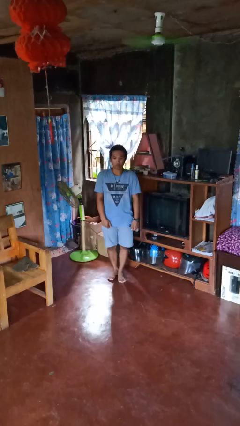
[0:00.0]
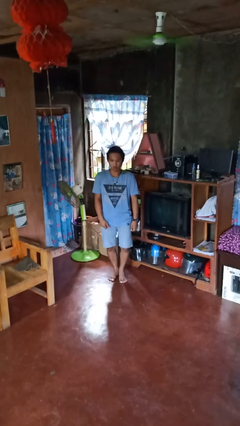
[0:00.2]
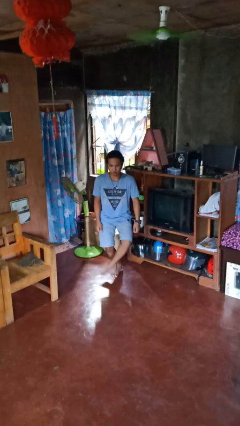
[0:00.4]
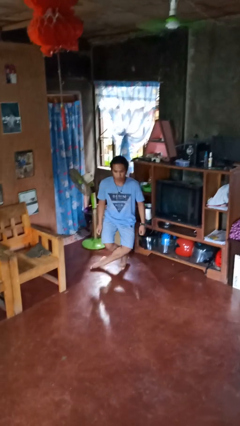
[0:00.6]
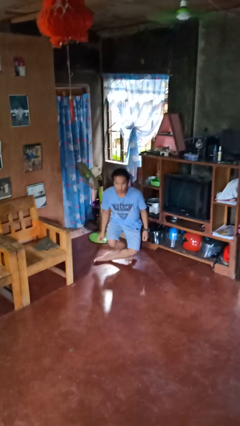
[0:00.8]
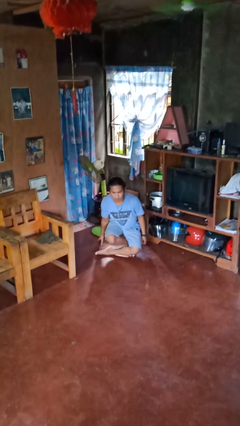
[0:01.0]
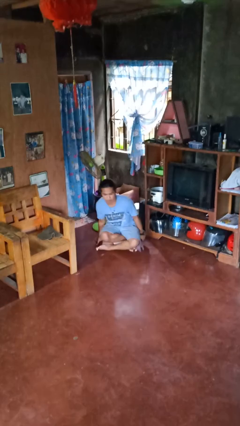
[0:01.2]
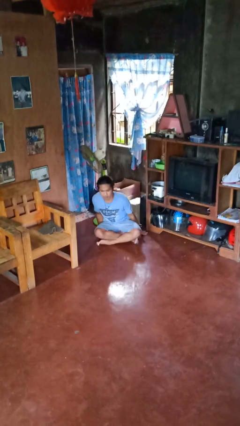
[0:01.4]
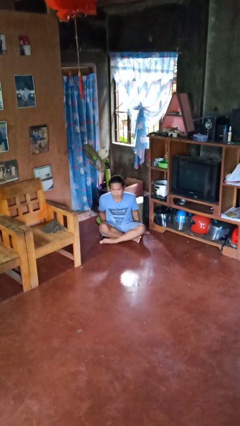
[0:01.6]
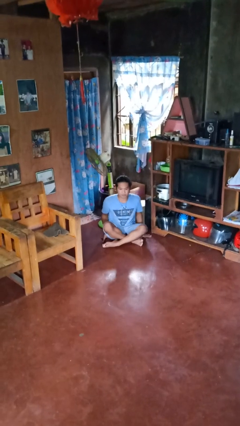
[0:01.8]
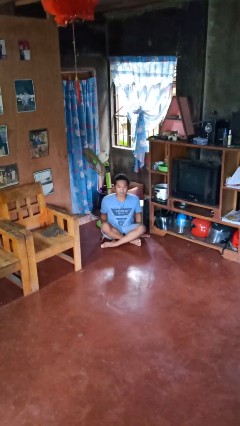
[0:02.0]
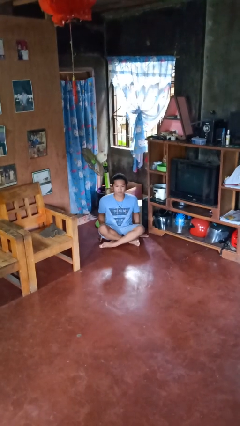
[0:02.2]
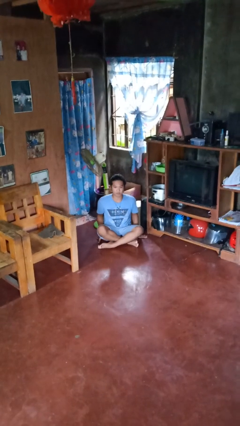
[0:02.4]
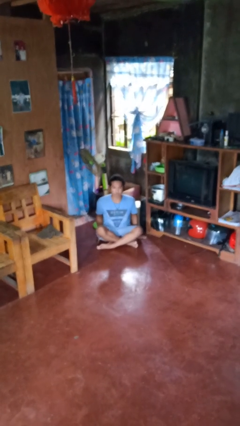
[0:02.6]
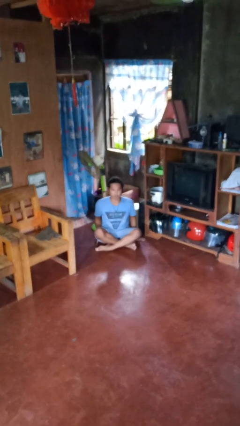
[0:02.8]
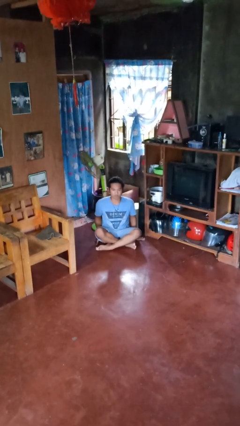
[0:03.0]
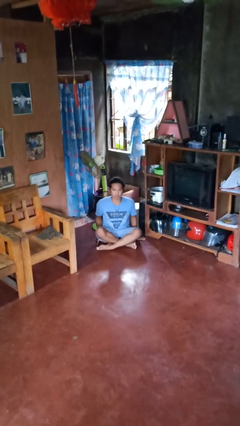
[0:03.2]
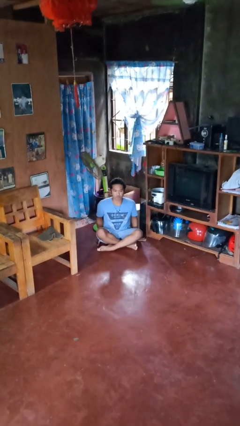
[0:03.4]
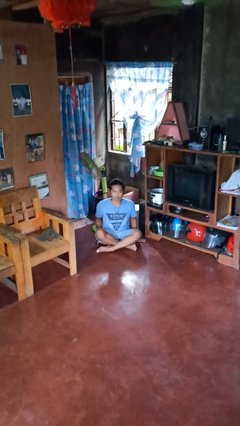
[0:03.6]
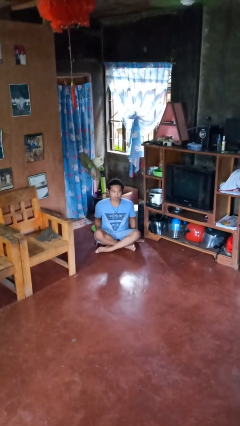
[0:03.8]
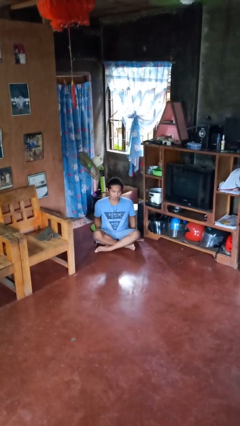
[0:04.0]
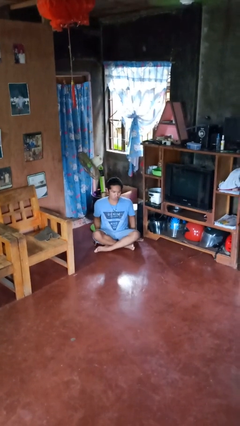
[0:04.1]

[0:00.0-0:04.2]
person sits crisscross

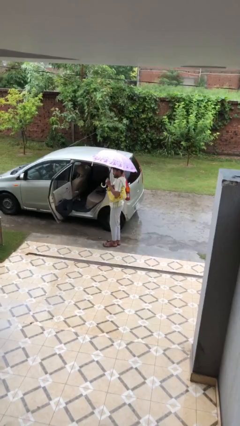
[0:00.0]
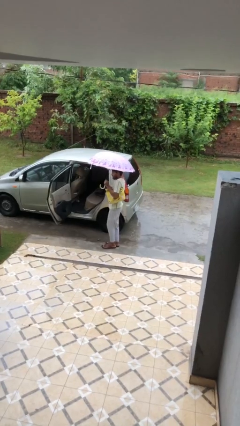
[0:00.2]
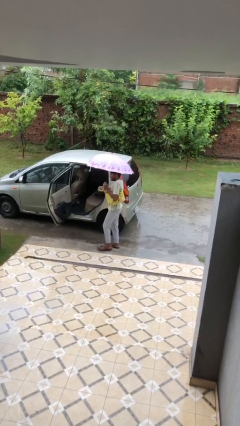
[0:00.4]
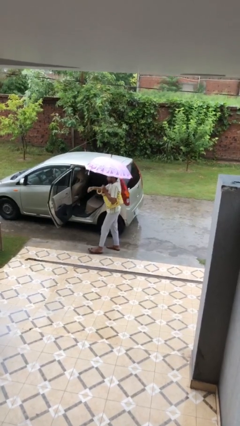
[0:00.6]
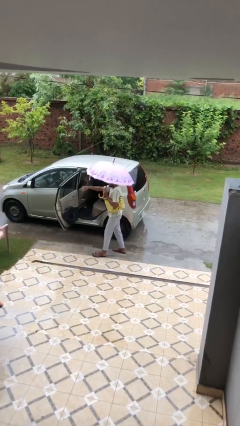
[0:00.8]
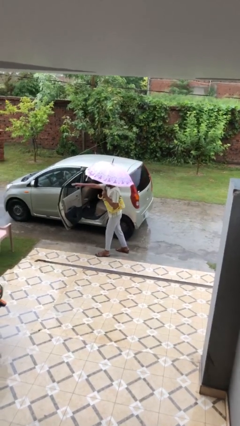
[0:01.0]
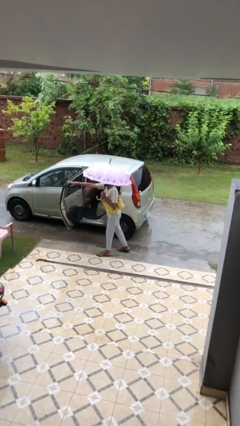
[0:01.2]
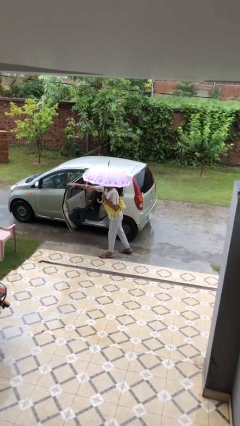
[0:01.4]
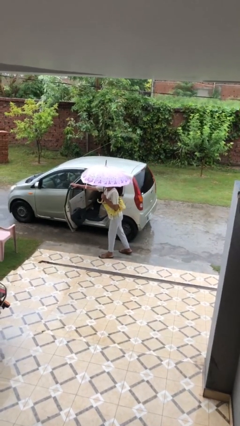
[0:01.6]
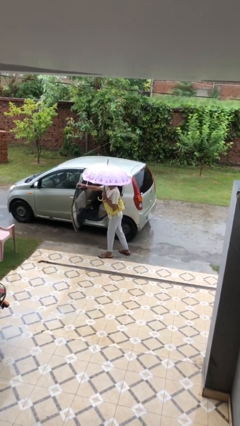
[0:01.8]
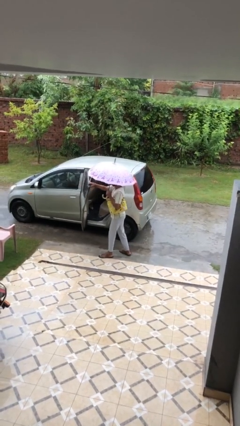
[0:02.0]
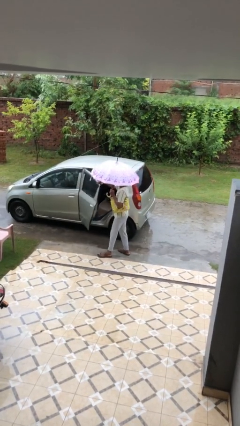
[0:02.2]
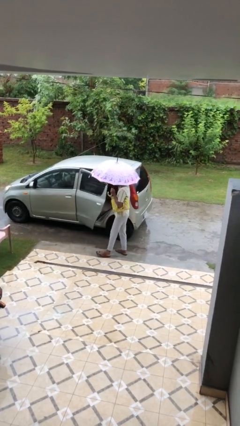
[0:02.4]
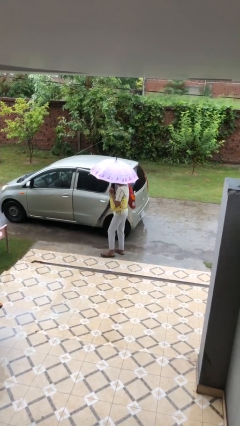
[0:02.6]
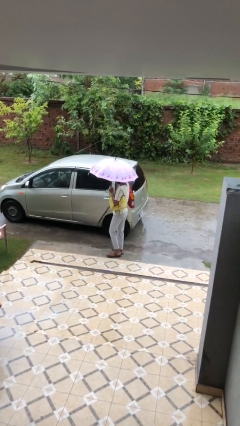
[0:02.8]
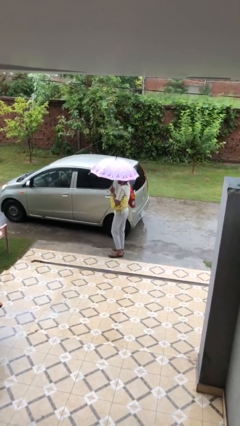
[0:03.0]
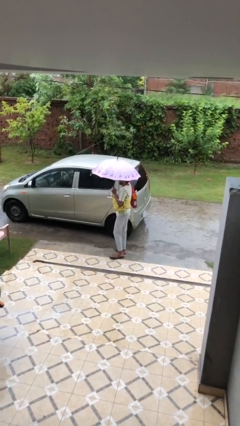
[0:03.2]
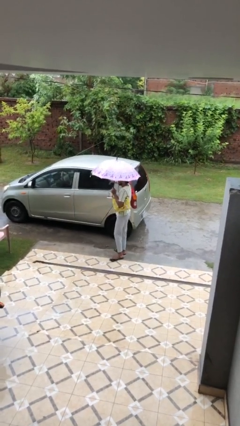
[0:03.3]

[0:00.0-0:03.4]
person closes car door

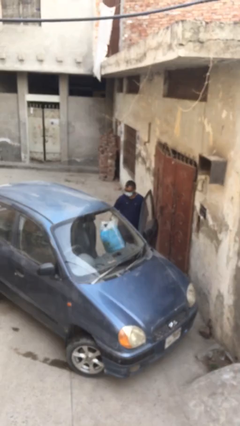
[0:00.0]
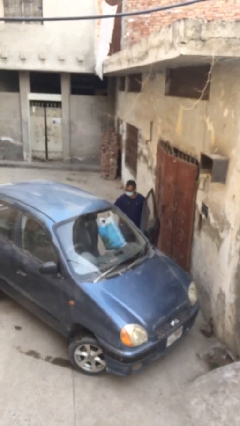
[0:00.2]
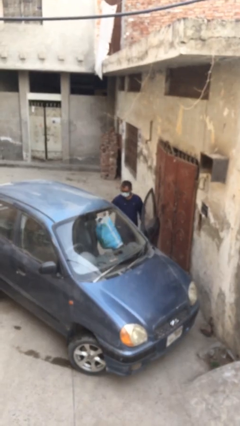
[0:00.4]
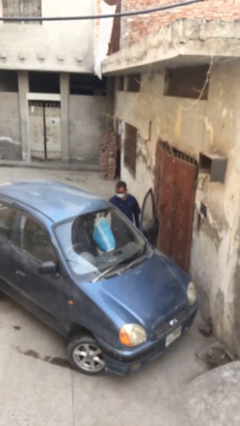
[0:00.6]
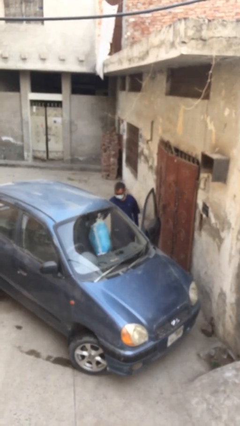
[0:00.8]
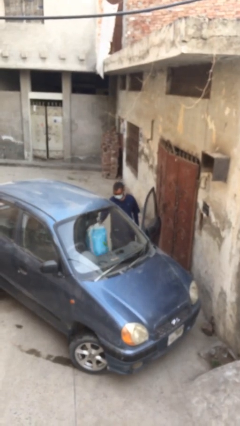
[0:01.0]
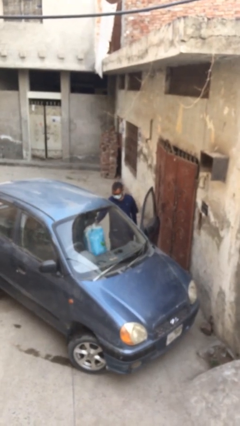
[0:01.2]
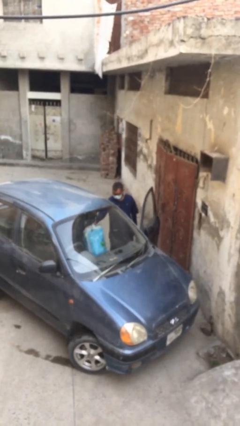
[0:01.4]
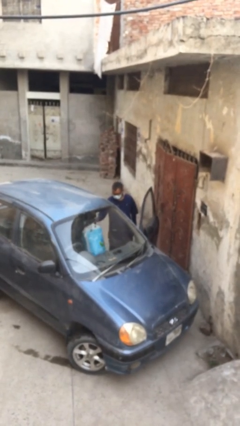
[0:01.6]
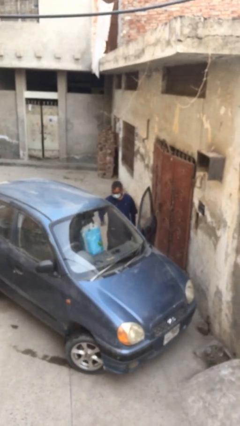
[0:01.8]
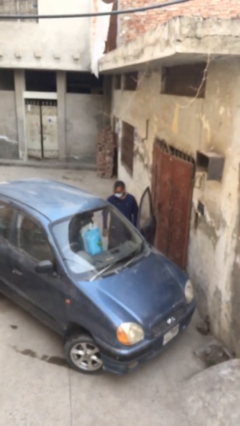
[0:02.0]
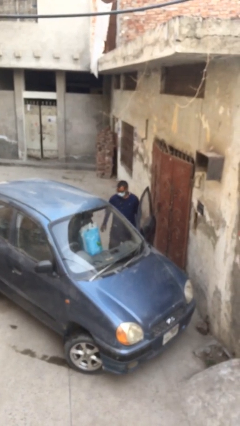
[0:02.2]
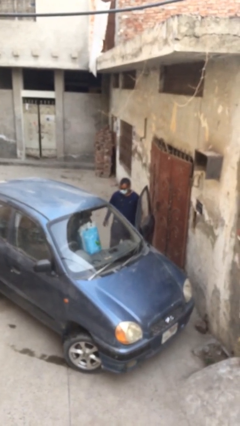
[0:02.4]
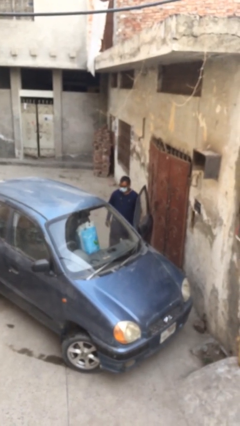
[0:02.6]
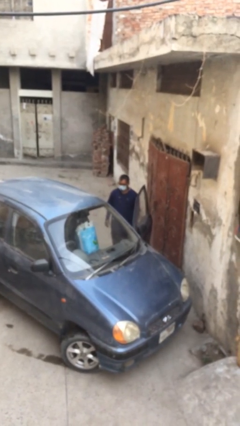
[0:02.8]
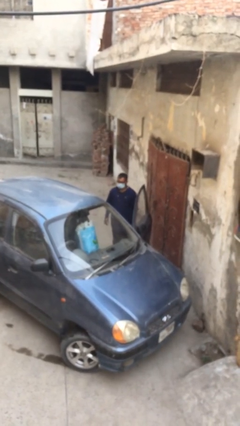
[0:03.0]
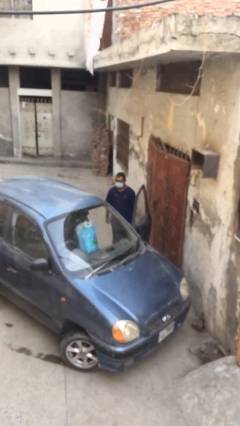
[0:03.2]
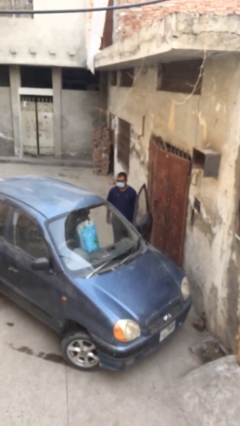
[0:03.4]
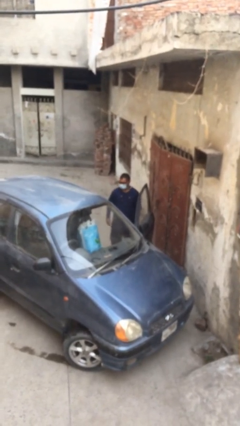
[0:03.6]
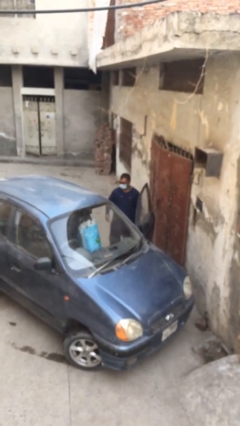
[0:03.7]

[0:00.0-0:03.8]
person loads car

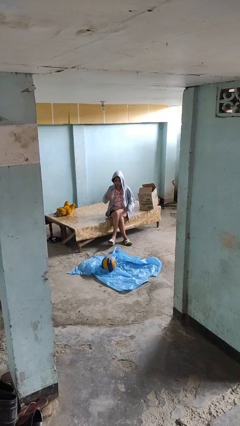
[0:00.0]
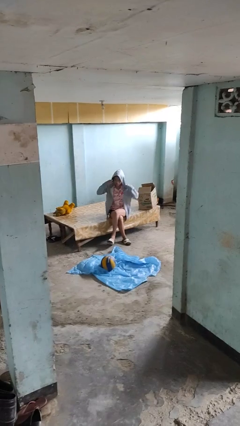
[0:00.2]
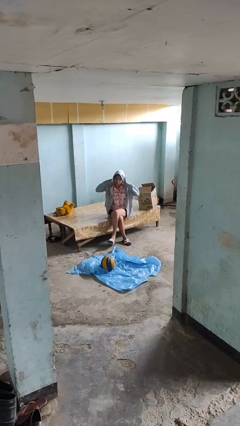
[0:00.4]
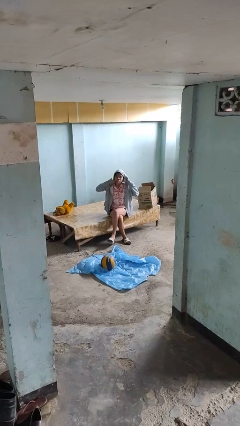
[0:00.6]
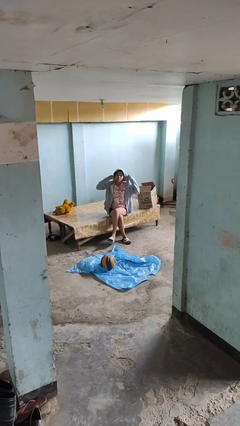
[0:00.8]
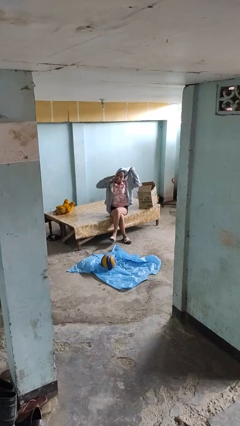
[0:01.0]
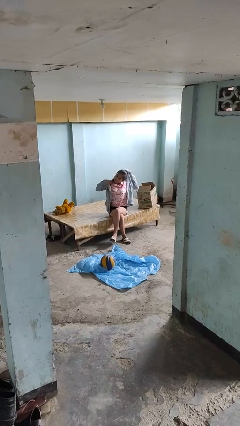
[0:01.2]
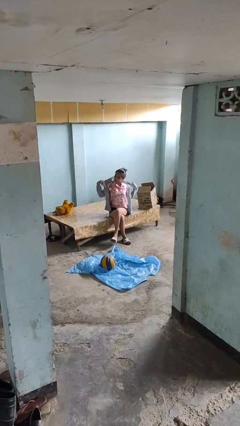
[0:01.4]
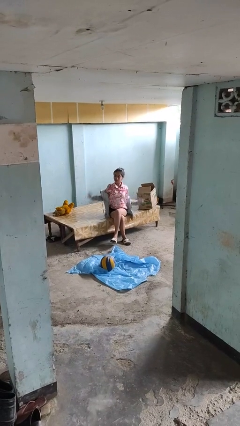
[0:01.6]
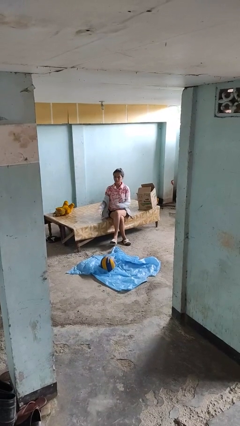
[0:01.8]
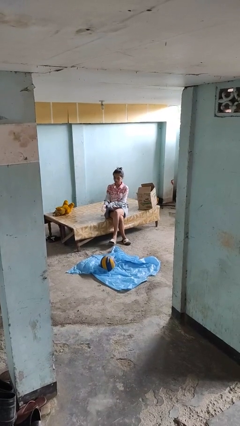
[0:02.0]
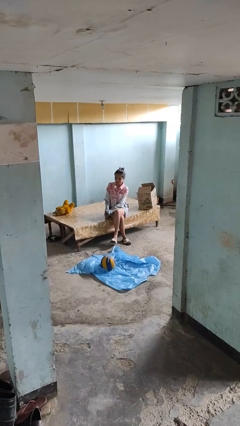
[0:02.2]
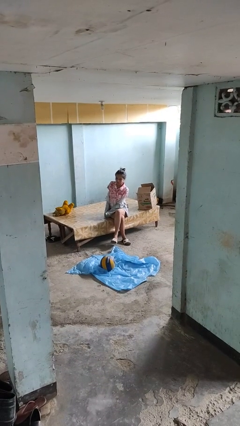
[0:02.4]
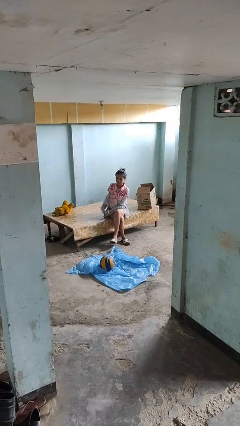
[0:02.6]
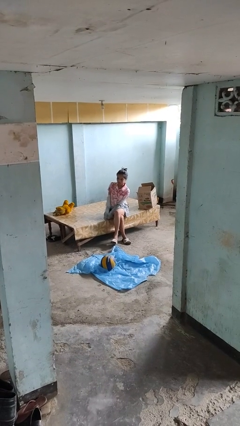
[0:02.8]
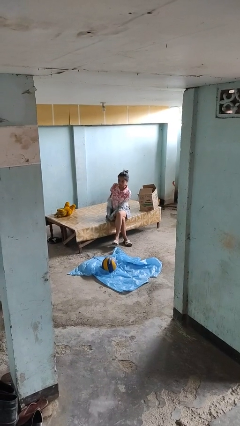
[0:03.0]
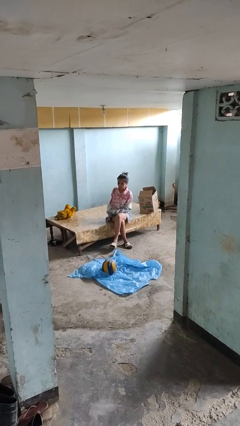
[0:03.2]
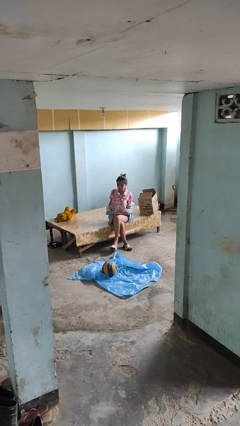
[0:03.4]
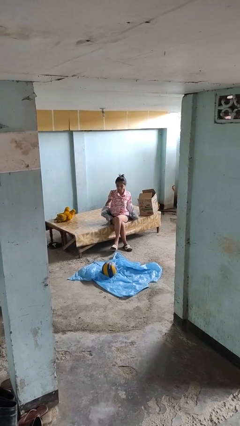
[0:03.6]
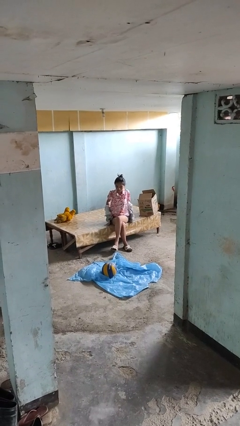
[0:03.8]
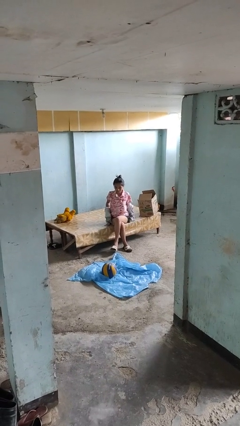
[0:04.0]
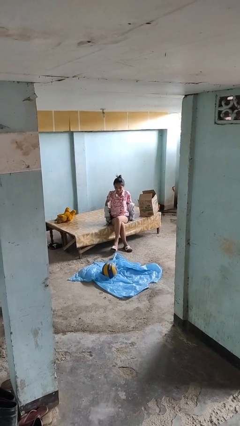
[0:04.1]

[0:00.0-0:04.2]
person takes off hoodie

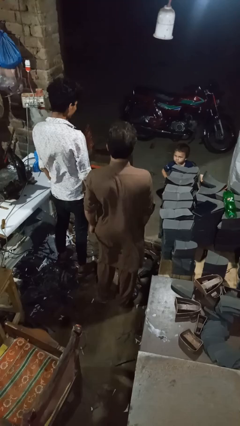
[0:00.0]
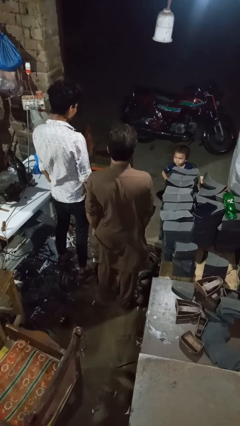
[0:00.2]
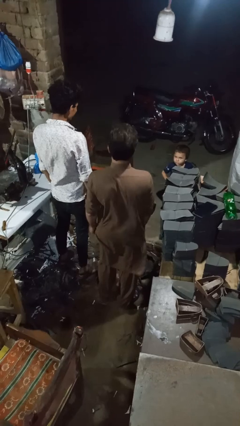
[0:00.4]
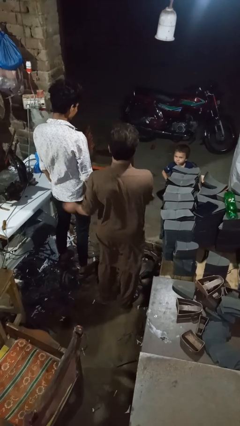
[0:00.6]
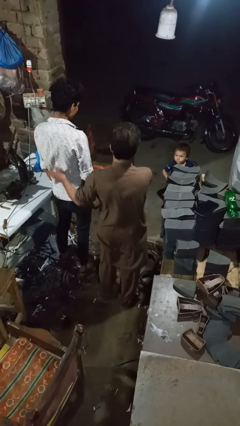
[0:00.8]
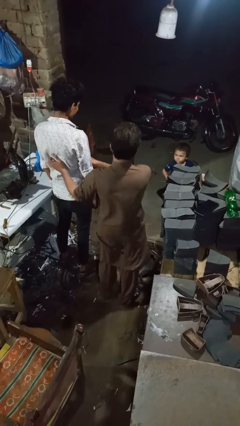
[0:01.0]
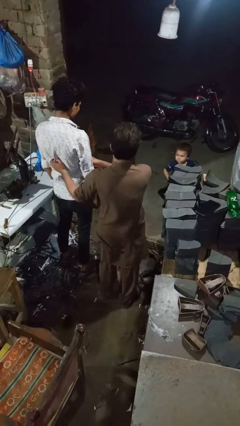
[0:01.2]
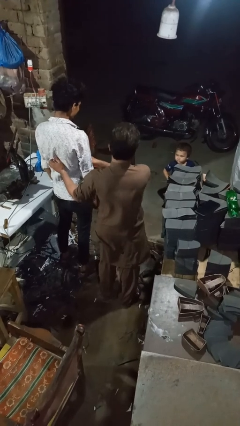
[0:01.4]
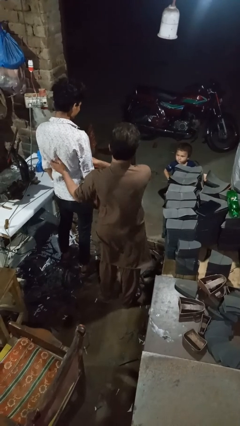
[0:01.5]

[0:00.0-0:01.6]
person tickles person
